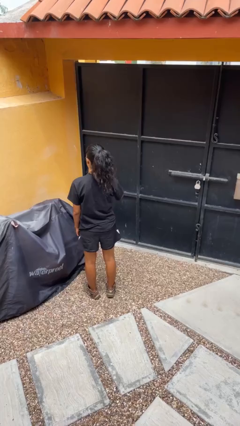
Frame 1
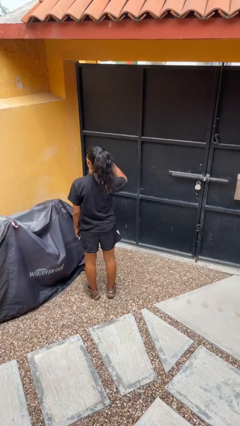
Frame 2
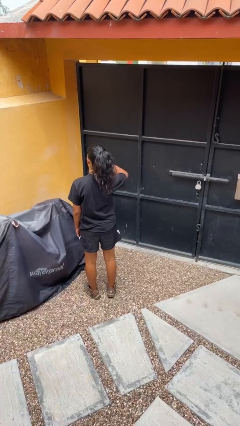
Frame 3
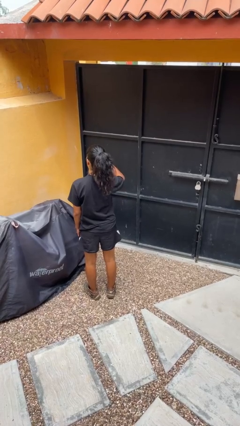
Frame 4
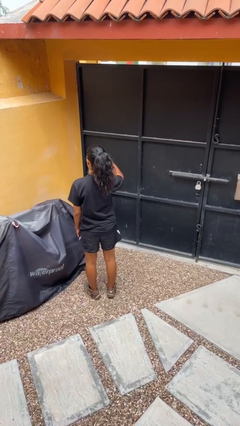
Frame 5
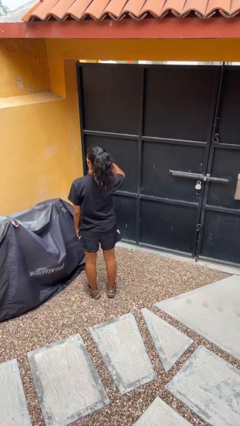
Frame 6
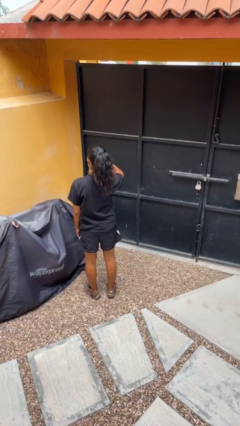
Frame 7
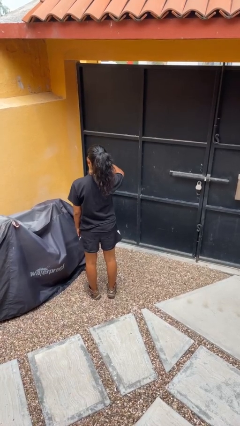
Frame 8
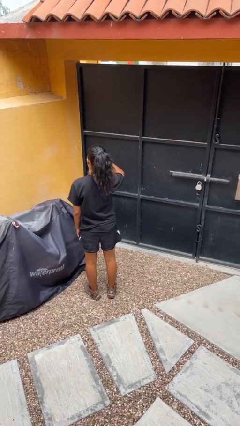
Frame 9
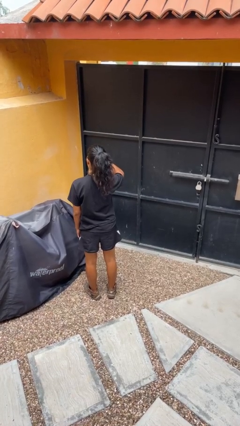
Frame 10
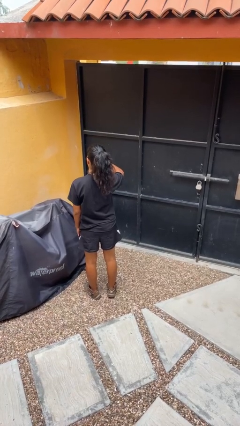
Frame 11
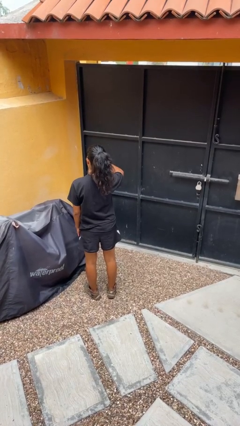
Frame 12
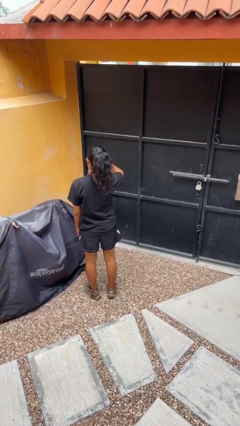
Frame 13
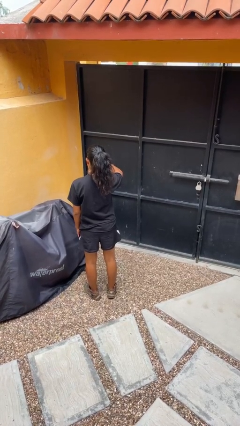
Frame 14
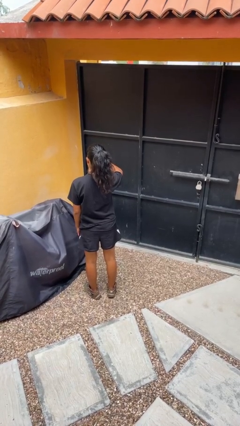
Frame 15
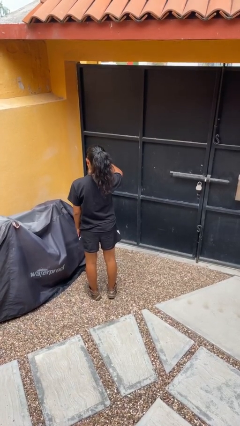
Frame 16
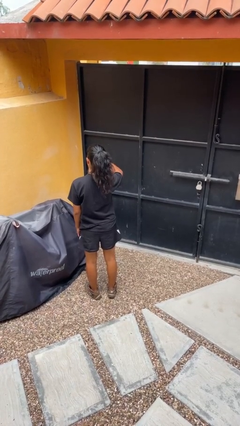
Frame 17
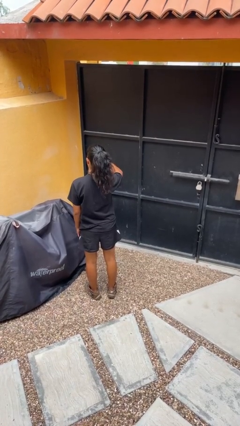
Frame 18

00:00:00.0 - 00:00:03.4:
person gestures thumbs down

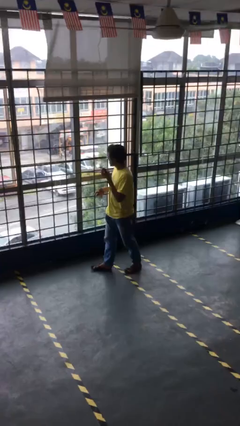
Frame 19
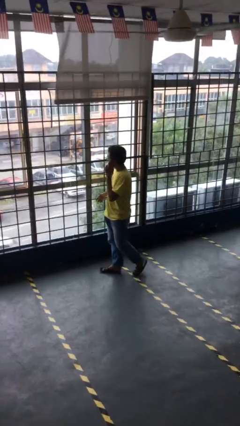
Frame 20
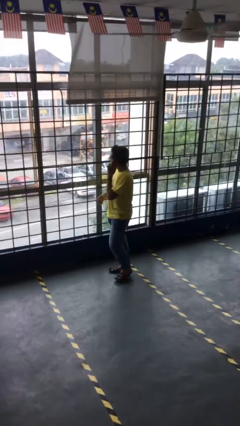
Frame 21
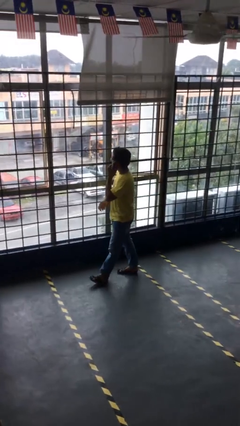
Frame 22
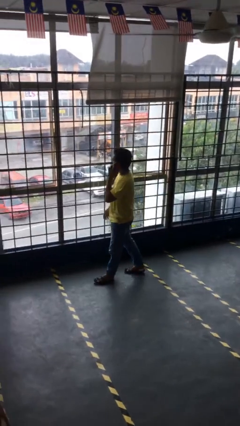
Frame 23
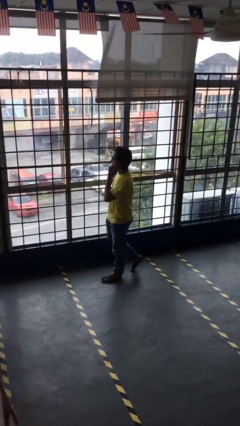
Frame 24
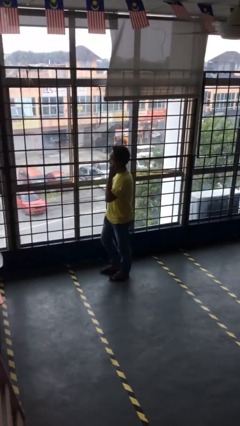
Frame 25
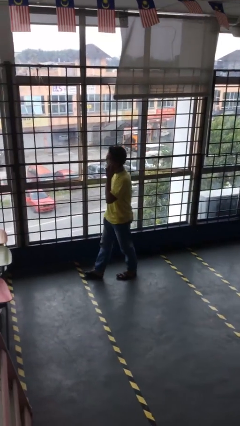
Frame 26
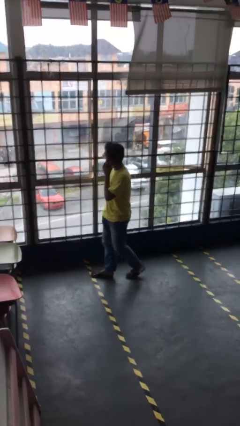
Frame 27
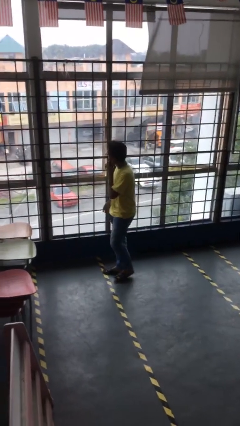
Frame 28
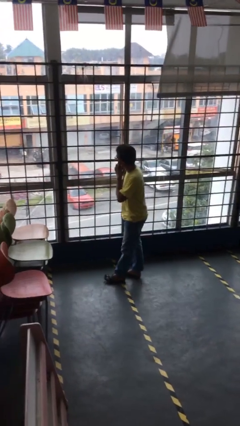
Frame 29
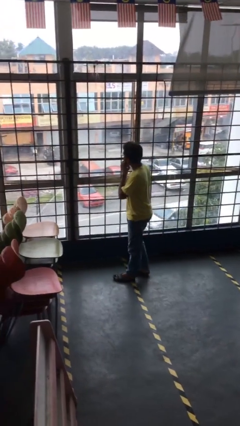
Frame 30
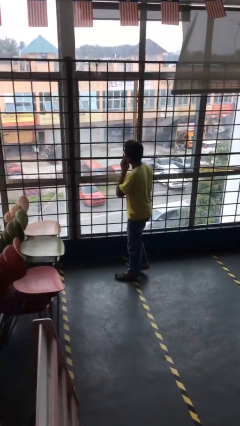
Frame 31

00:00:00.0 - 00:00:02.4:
person talks on phone

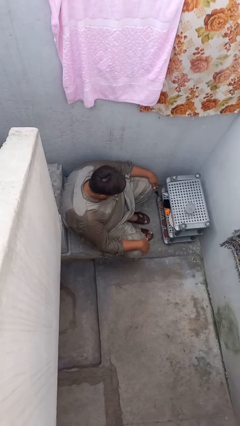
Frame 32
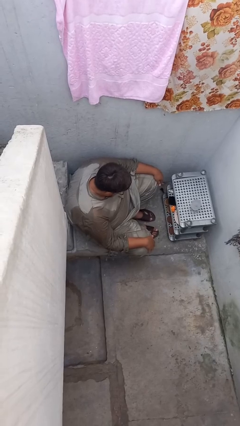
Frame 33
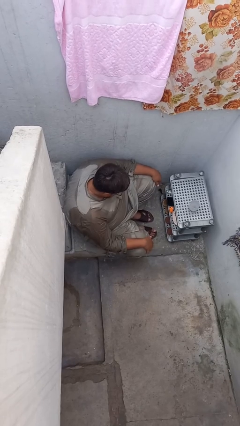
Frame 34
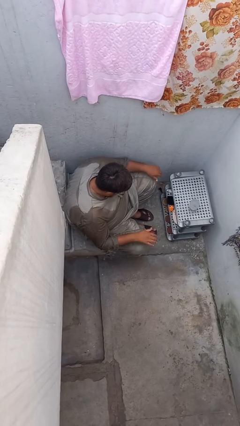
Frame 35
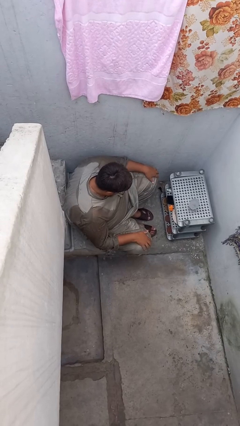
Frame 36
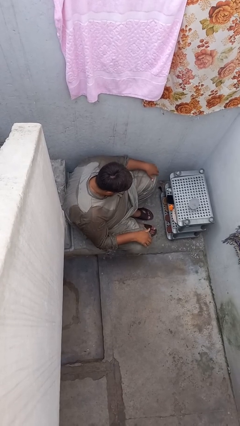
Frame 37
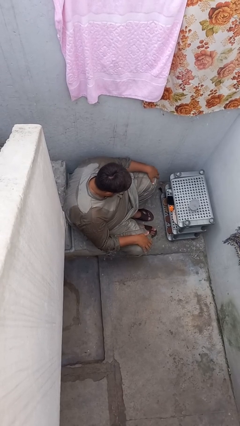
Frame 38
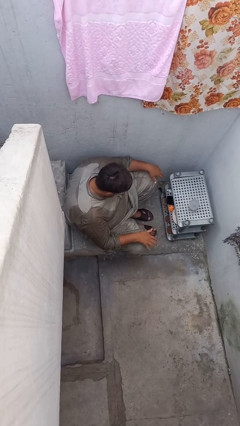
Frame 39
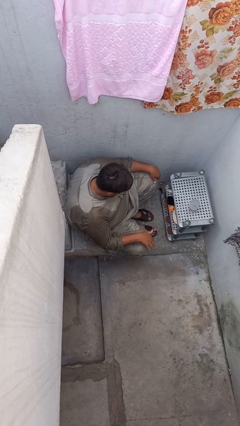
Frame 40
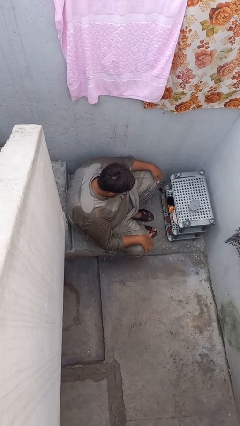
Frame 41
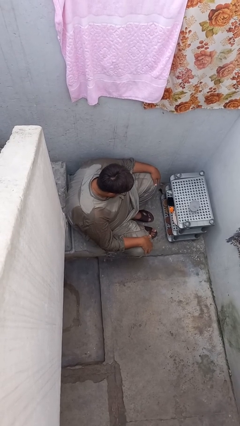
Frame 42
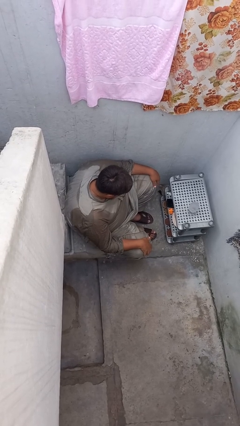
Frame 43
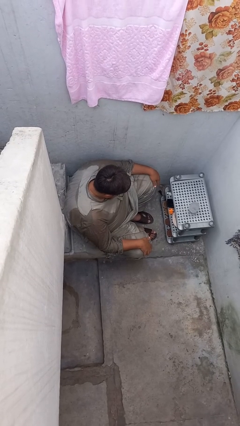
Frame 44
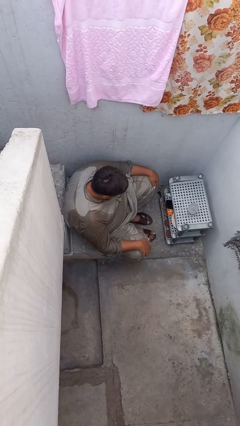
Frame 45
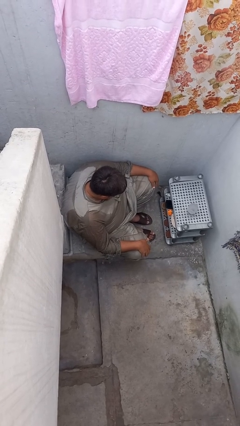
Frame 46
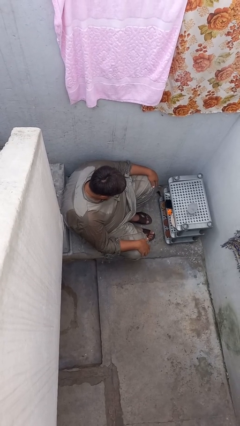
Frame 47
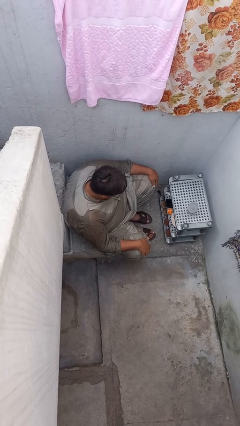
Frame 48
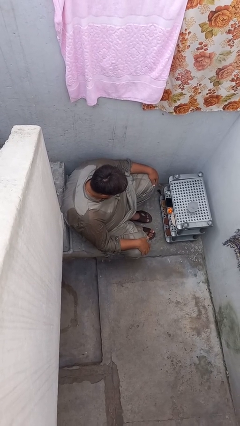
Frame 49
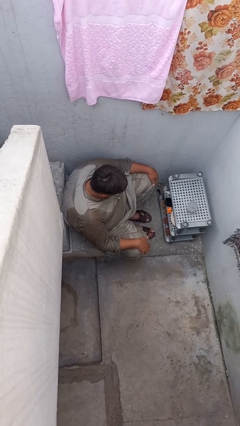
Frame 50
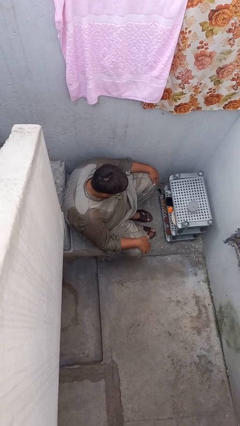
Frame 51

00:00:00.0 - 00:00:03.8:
person slaps hands on thighs

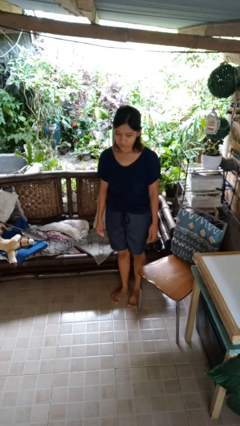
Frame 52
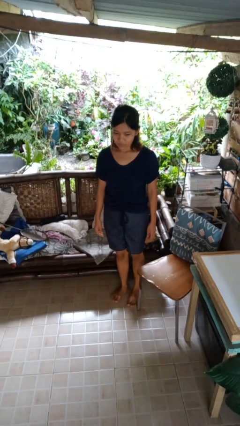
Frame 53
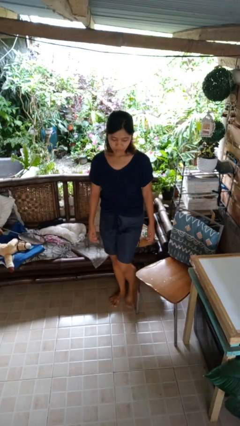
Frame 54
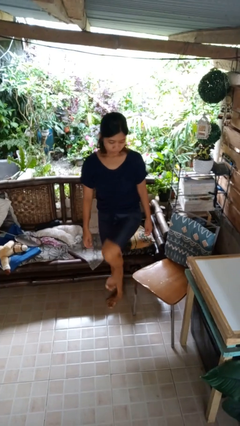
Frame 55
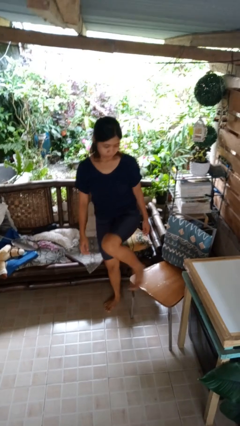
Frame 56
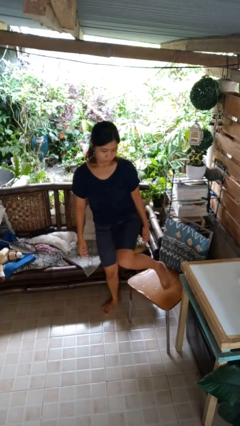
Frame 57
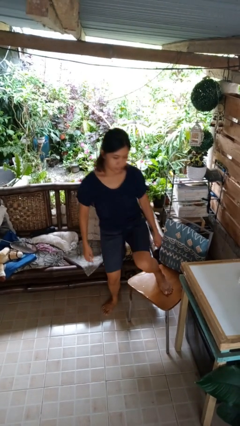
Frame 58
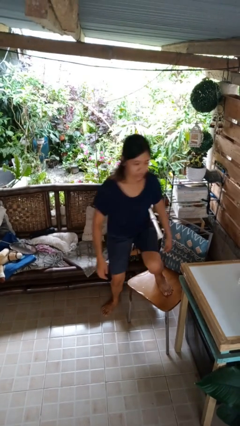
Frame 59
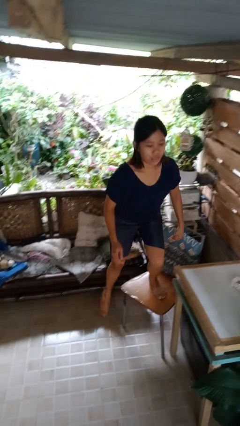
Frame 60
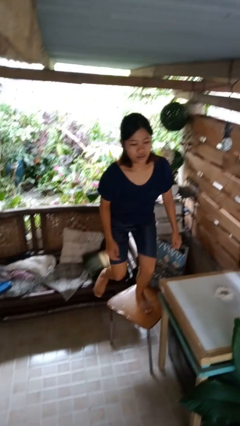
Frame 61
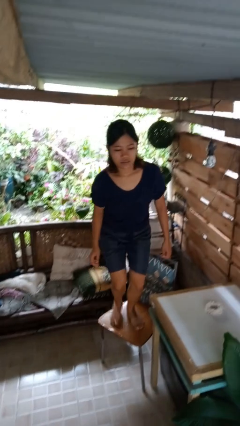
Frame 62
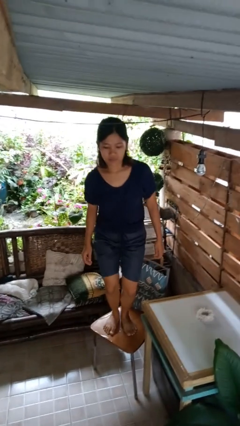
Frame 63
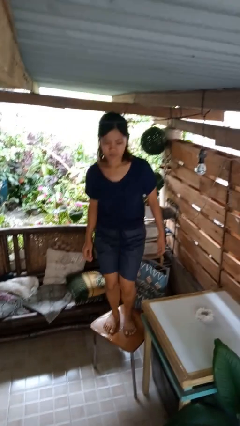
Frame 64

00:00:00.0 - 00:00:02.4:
person climbs on chair

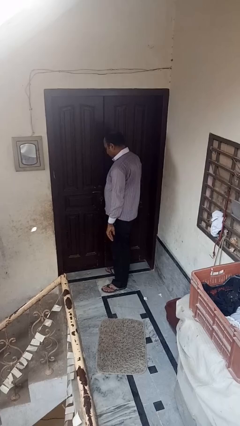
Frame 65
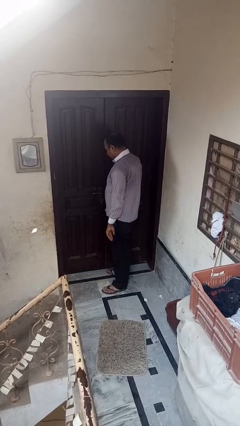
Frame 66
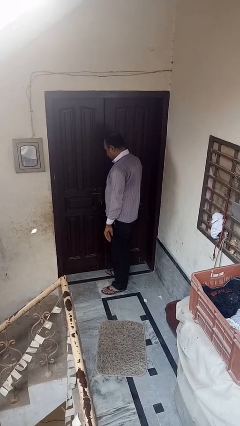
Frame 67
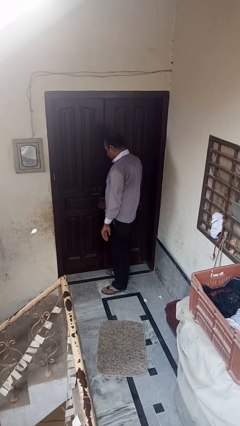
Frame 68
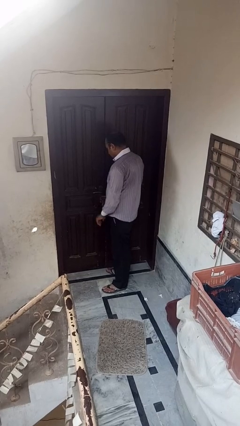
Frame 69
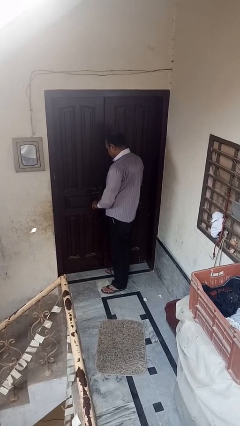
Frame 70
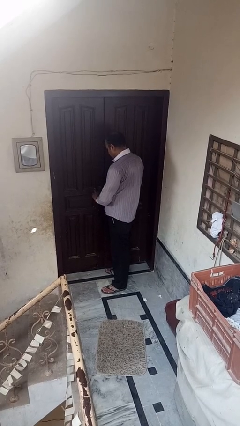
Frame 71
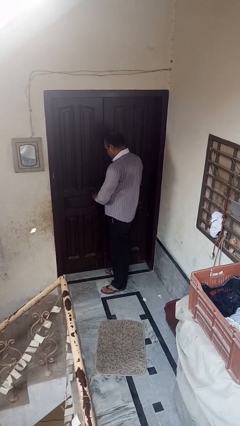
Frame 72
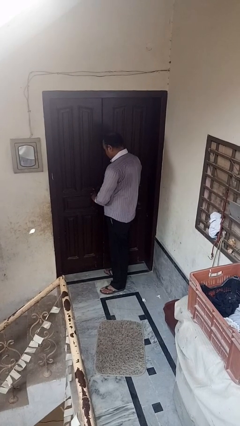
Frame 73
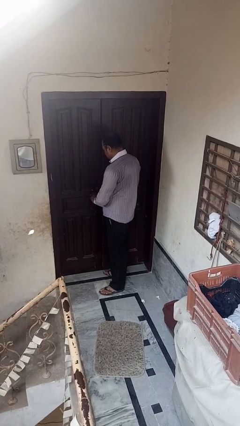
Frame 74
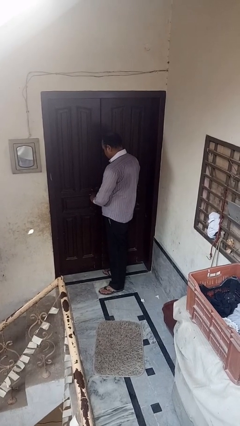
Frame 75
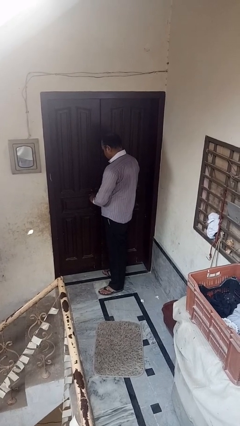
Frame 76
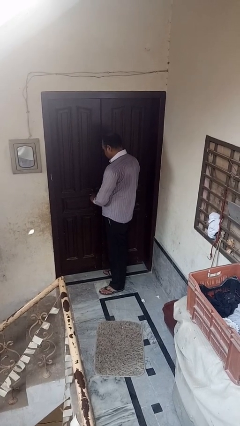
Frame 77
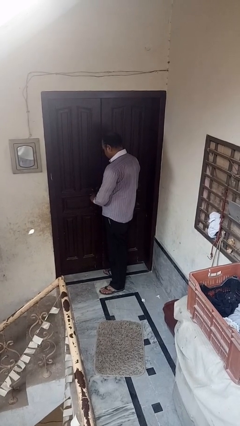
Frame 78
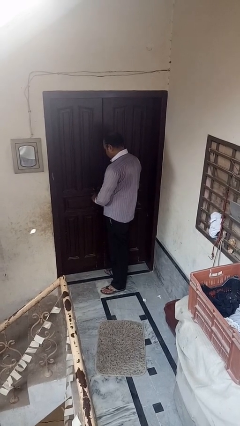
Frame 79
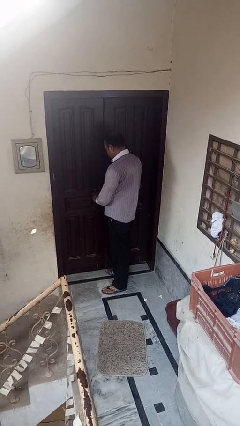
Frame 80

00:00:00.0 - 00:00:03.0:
person unlocks door with keys

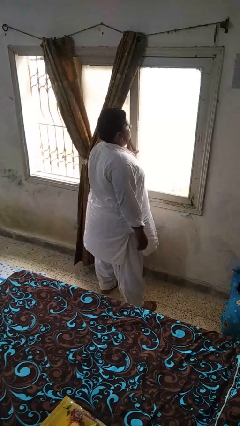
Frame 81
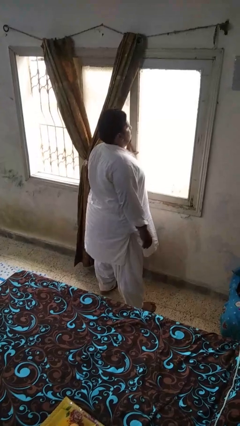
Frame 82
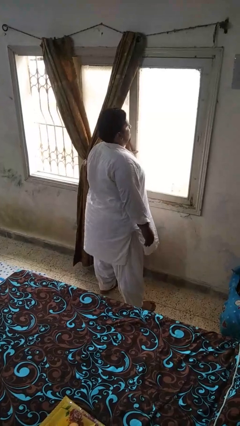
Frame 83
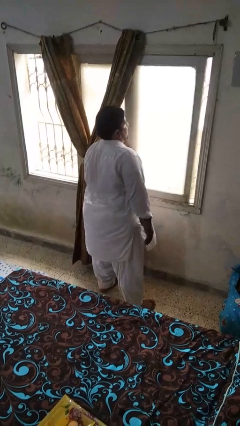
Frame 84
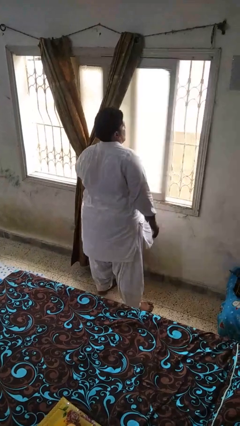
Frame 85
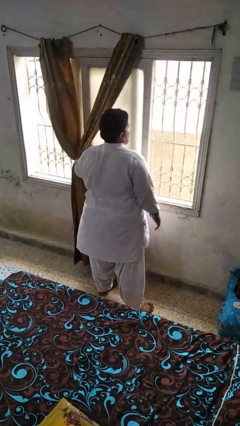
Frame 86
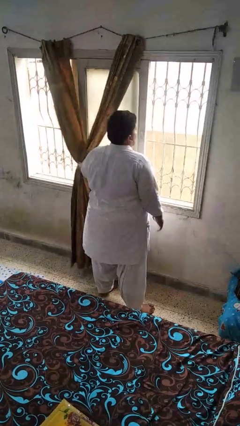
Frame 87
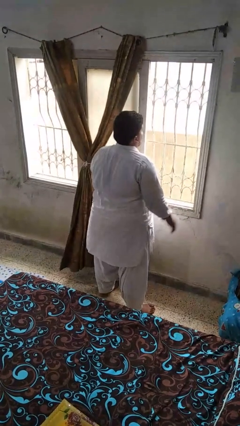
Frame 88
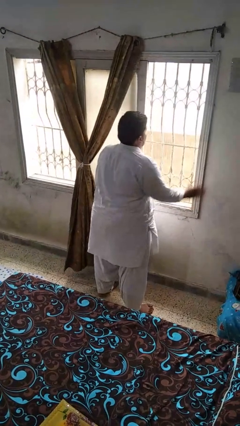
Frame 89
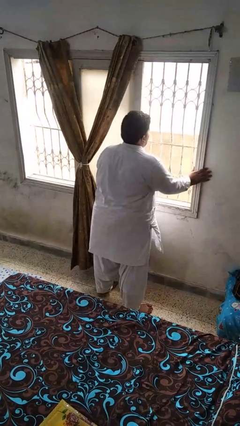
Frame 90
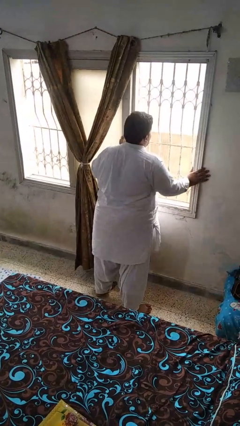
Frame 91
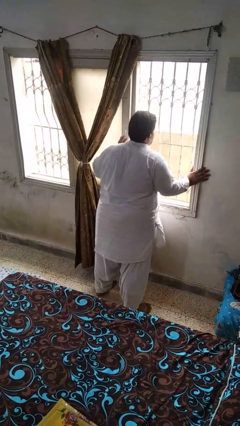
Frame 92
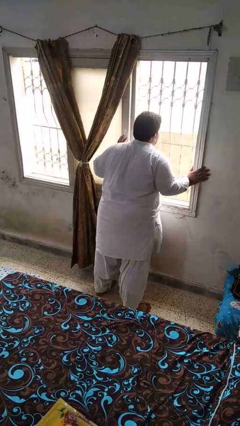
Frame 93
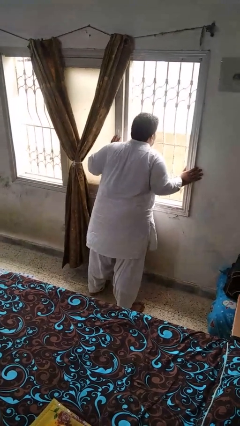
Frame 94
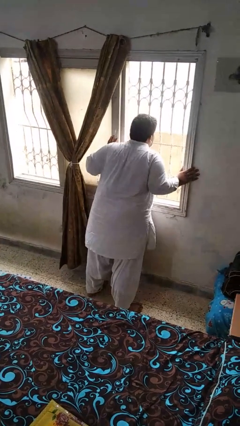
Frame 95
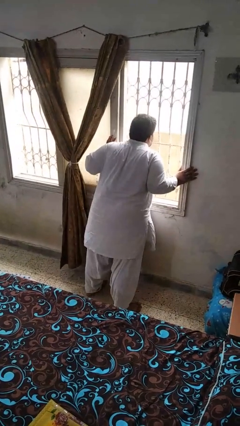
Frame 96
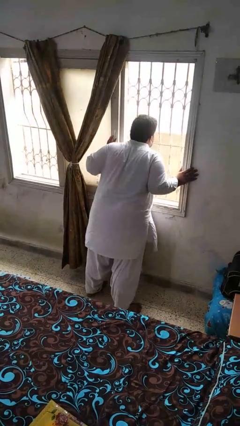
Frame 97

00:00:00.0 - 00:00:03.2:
person opens home window
